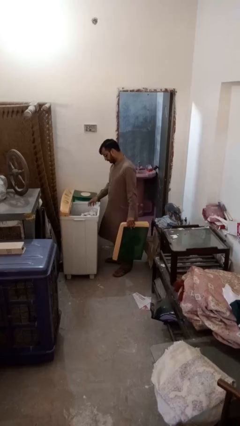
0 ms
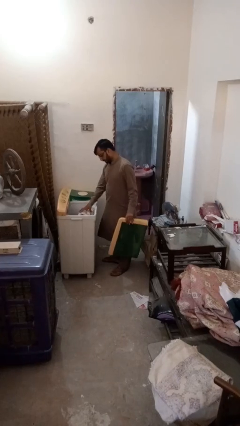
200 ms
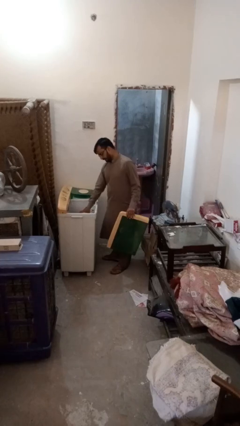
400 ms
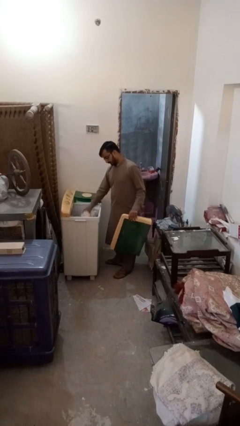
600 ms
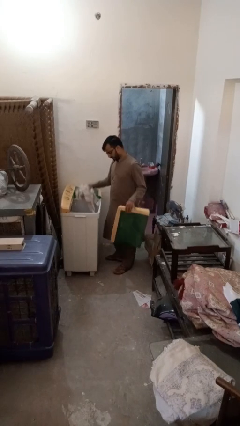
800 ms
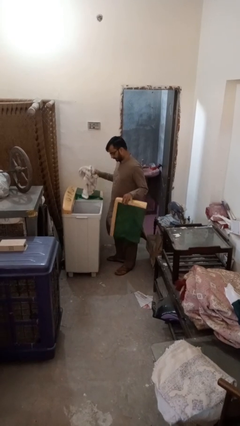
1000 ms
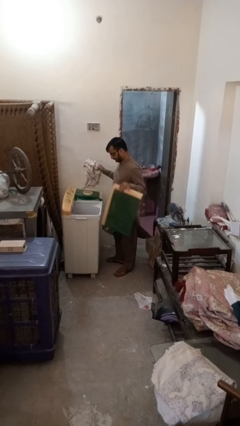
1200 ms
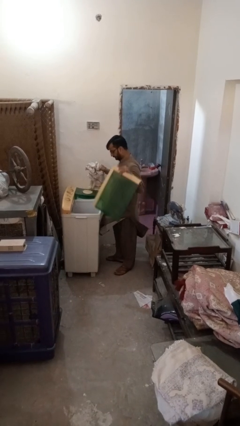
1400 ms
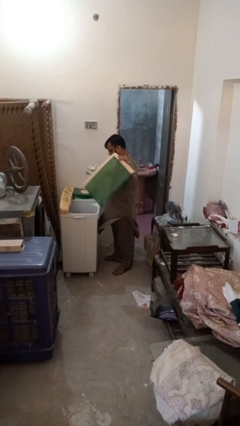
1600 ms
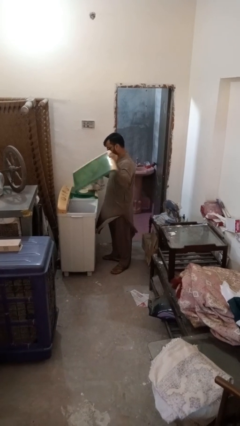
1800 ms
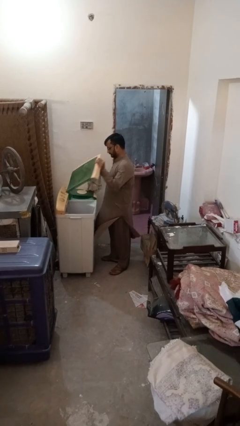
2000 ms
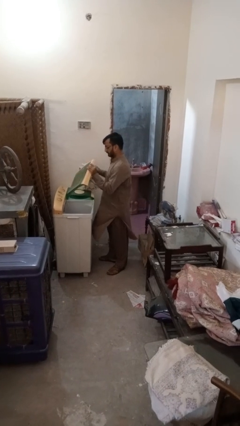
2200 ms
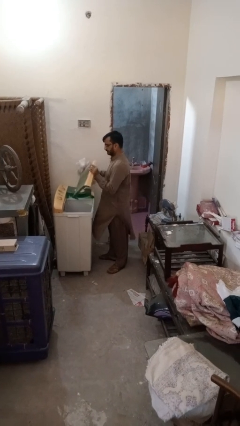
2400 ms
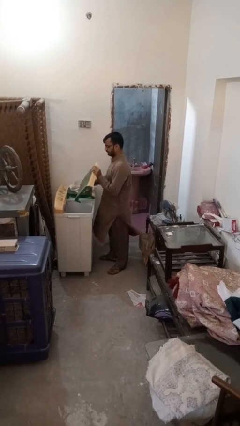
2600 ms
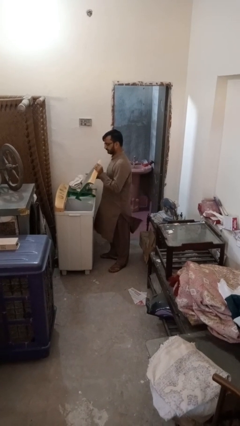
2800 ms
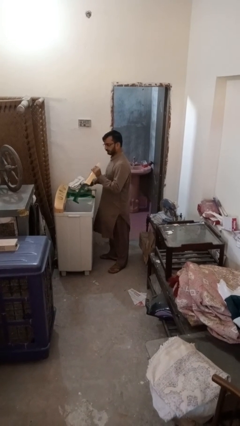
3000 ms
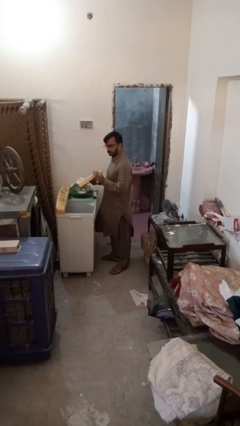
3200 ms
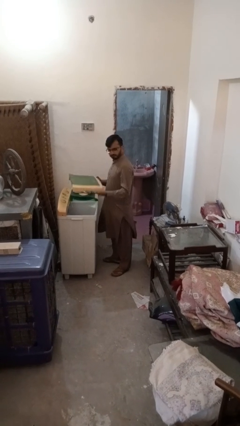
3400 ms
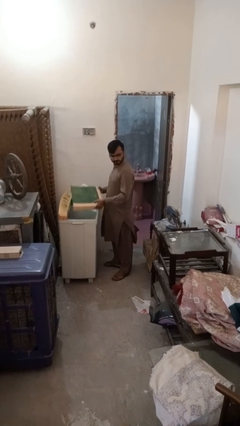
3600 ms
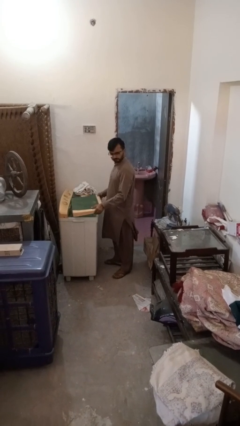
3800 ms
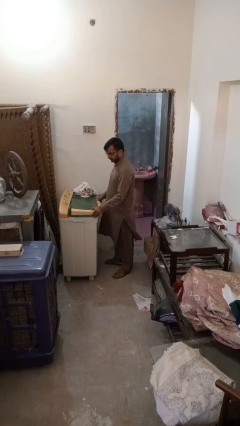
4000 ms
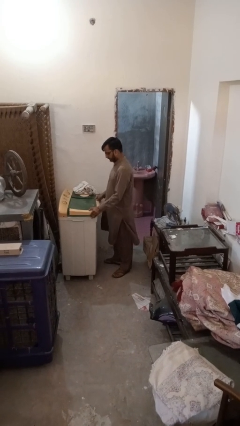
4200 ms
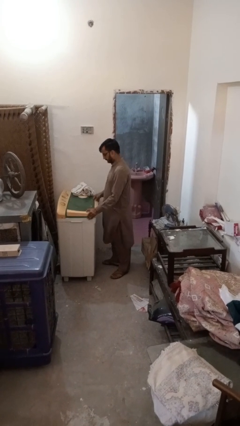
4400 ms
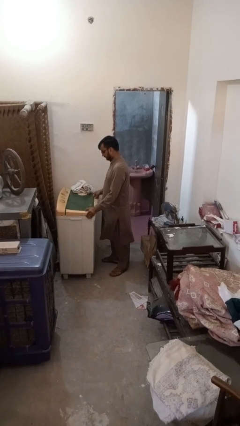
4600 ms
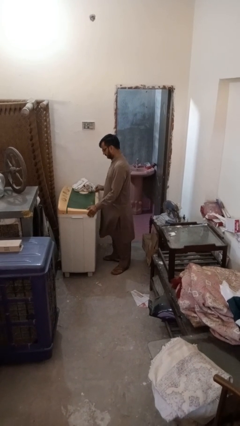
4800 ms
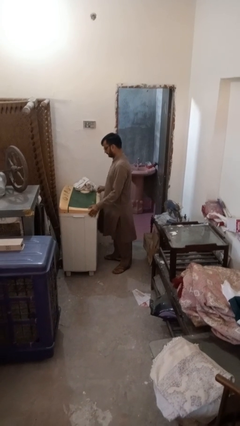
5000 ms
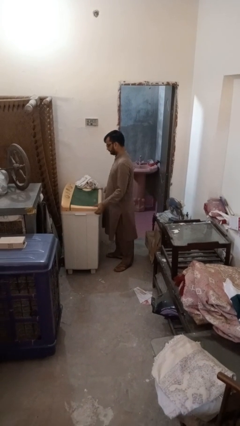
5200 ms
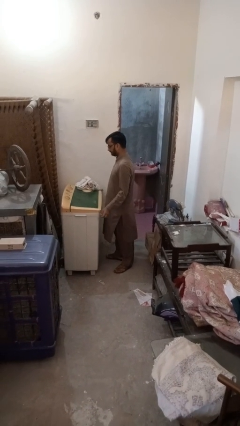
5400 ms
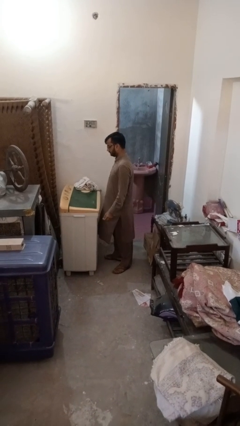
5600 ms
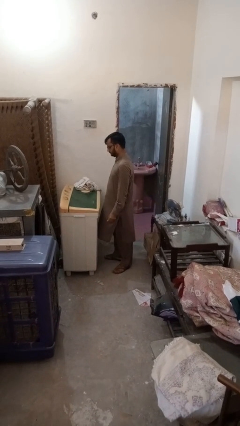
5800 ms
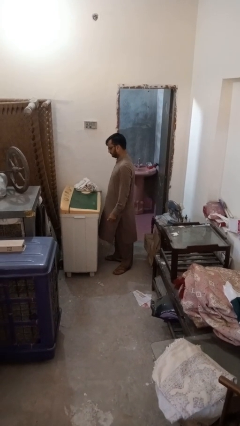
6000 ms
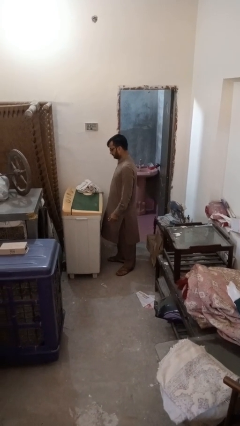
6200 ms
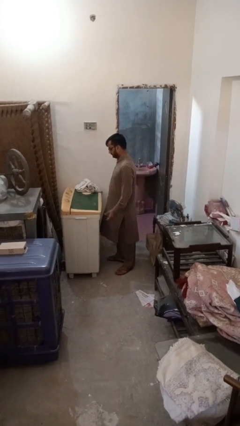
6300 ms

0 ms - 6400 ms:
person unloads clotheswasher

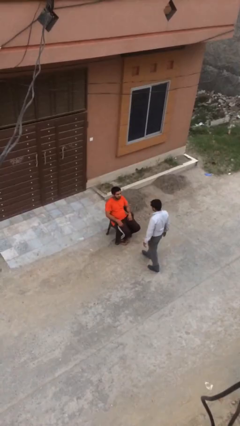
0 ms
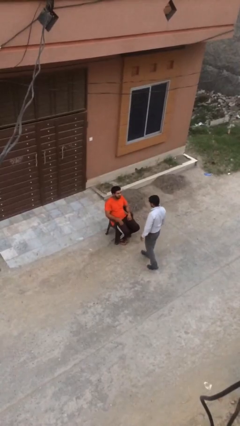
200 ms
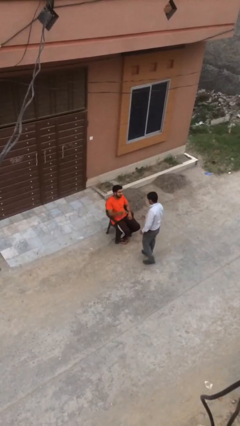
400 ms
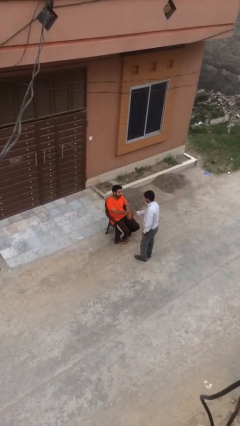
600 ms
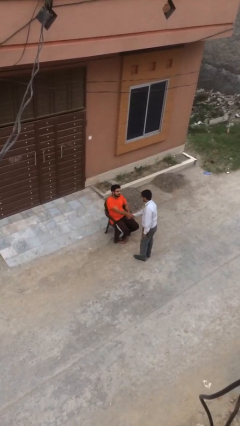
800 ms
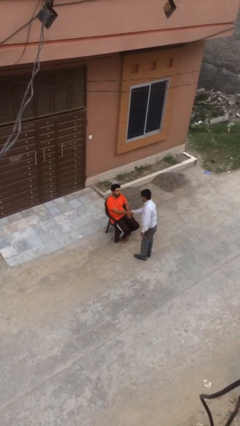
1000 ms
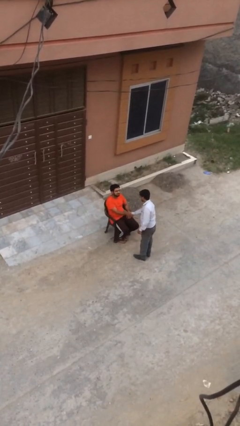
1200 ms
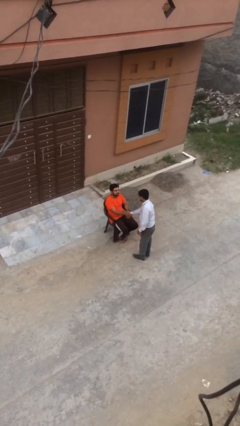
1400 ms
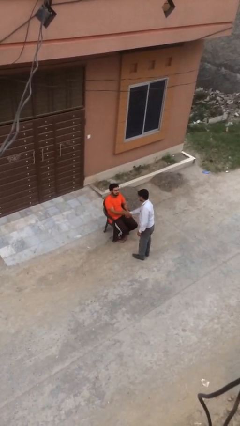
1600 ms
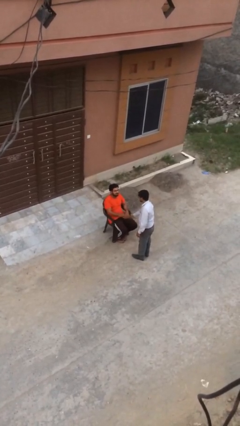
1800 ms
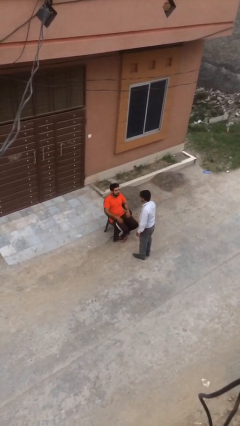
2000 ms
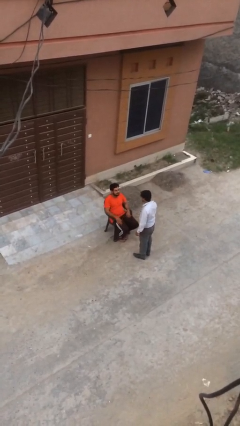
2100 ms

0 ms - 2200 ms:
person shakes hand

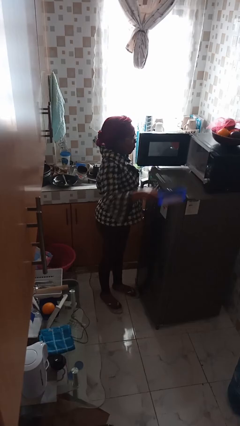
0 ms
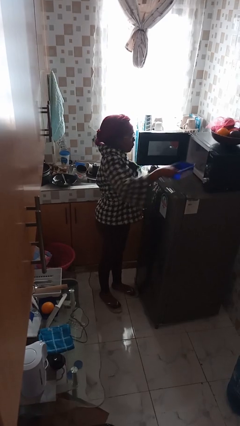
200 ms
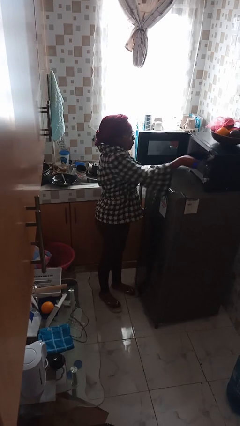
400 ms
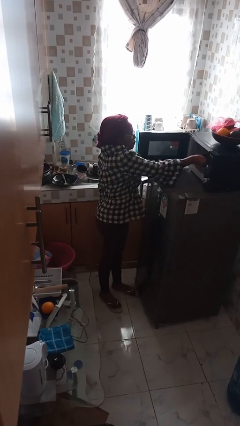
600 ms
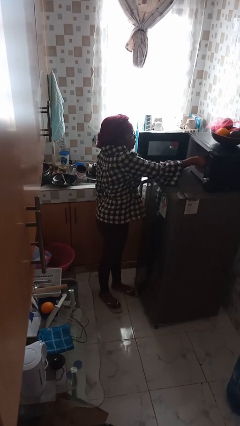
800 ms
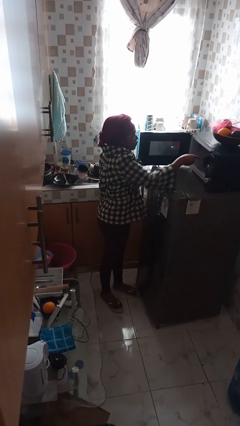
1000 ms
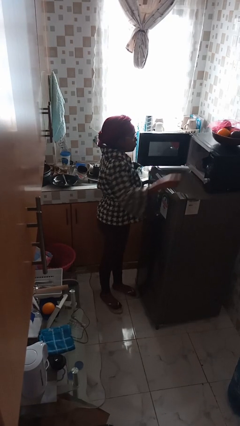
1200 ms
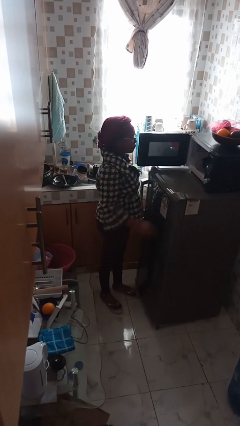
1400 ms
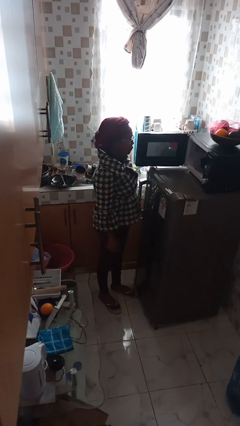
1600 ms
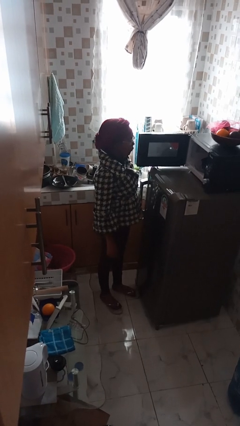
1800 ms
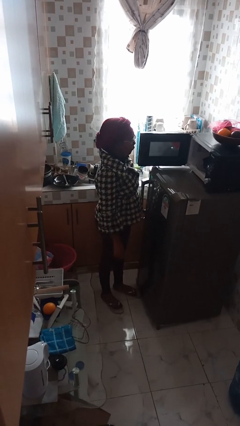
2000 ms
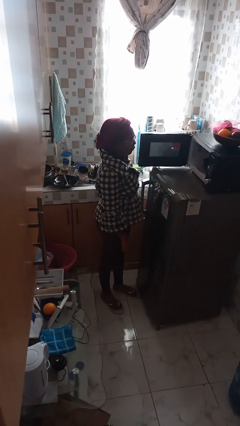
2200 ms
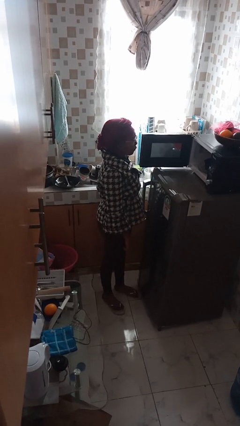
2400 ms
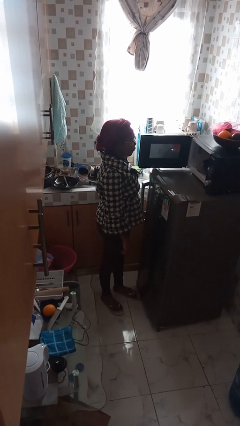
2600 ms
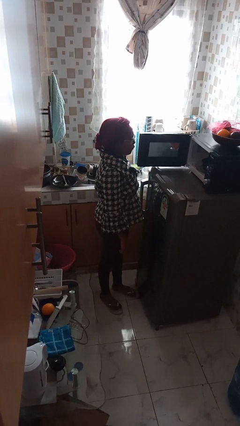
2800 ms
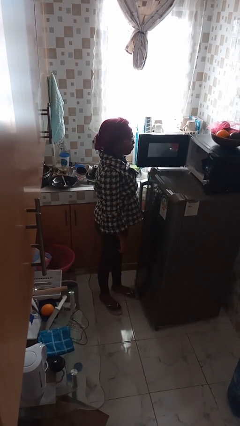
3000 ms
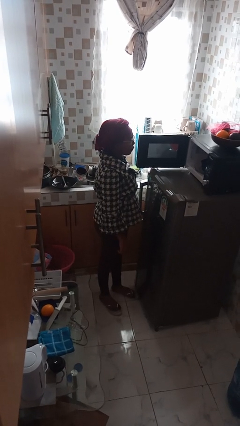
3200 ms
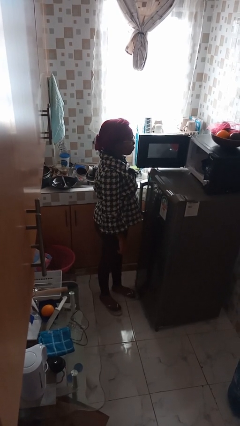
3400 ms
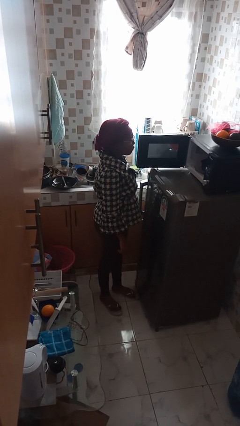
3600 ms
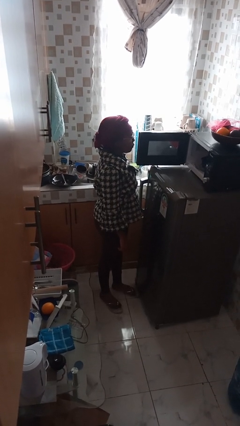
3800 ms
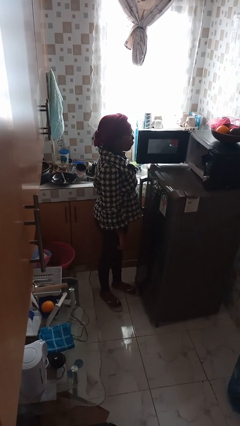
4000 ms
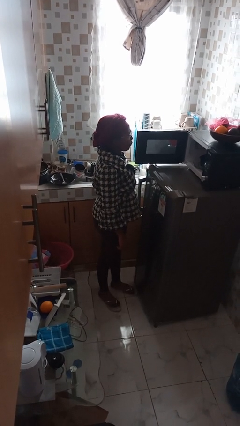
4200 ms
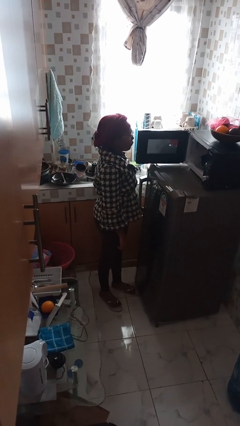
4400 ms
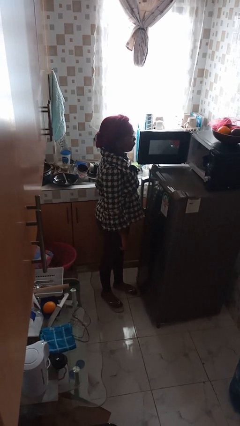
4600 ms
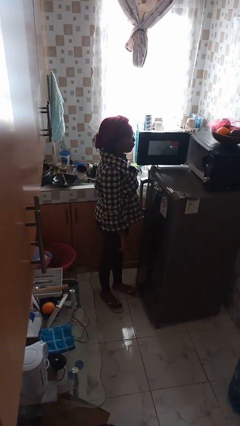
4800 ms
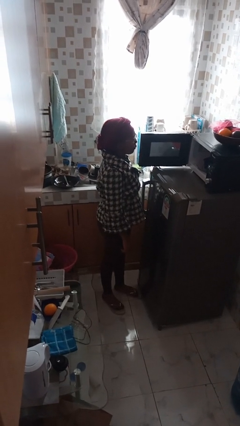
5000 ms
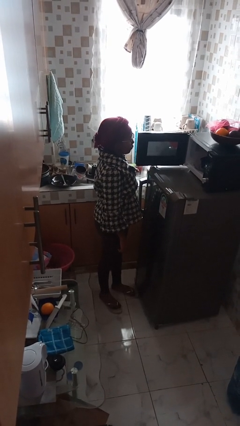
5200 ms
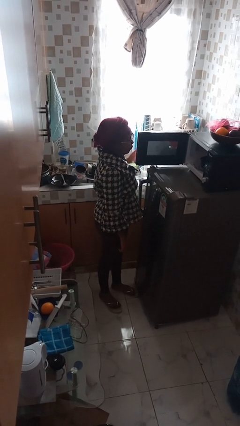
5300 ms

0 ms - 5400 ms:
person puts object into microwave

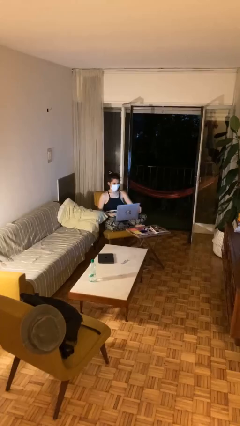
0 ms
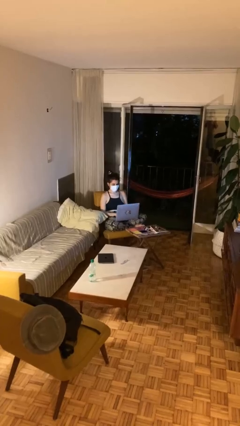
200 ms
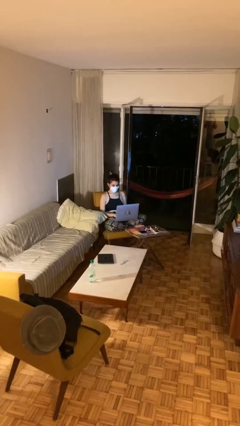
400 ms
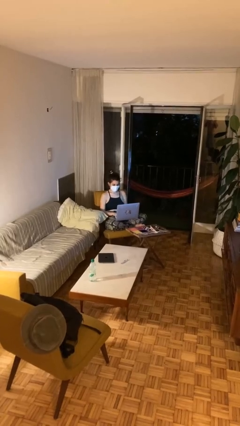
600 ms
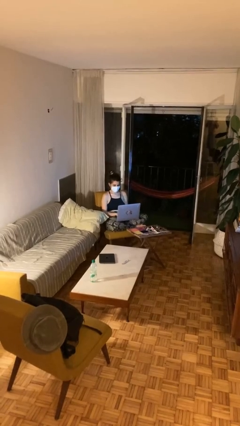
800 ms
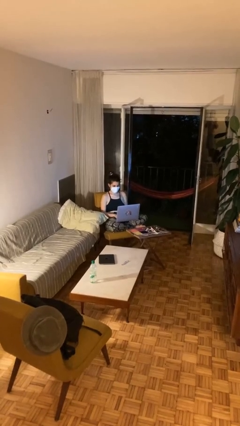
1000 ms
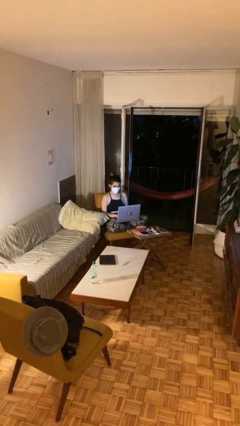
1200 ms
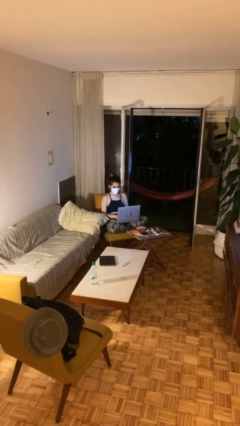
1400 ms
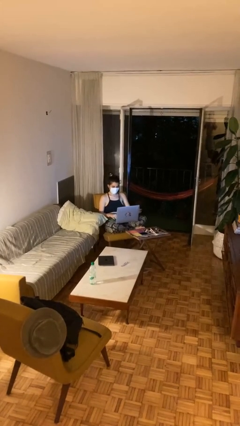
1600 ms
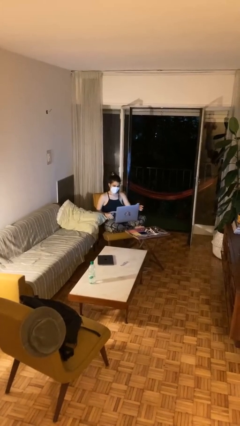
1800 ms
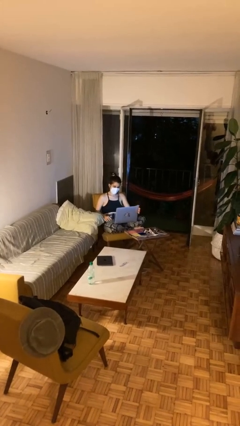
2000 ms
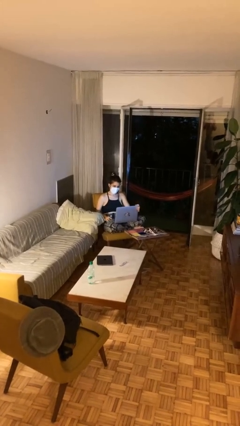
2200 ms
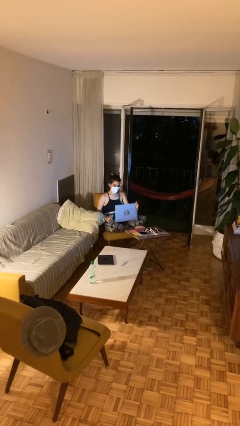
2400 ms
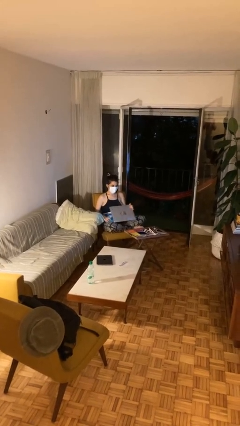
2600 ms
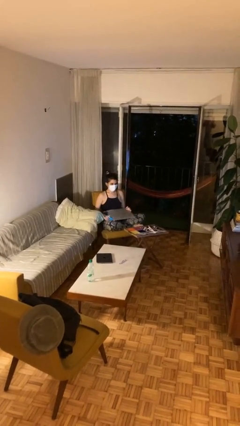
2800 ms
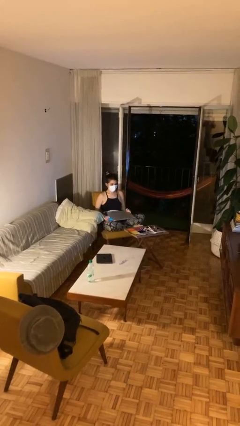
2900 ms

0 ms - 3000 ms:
person interacts with laptop

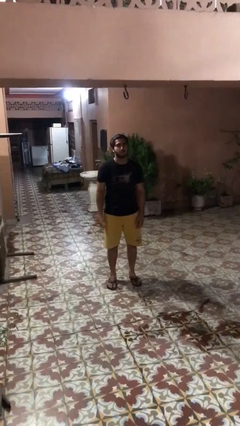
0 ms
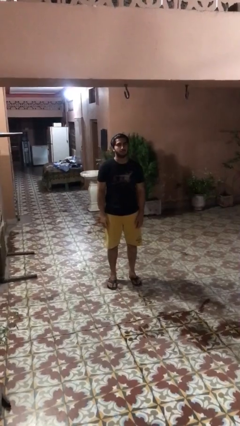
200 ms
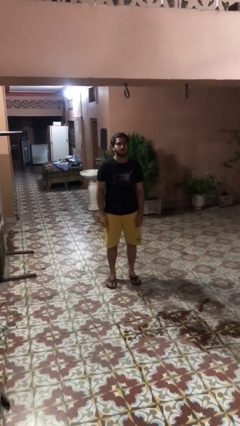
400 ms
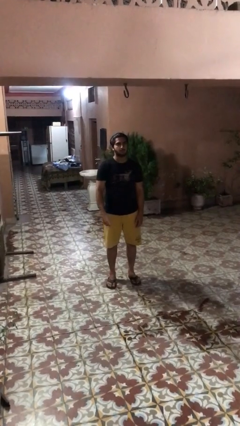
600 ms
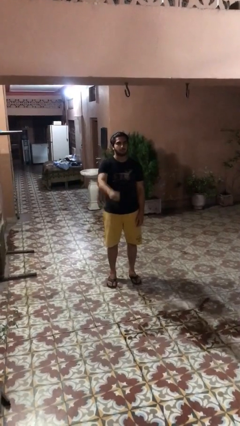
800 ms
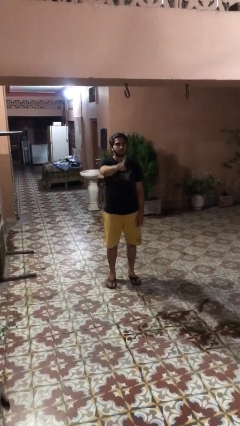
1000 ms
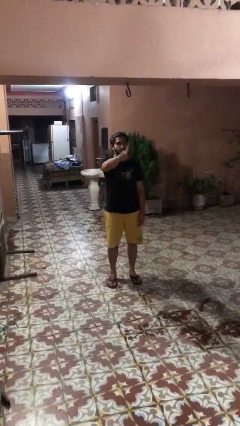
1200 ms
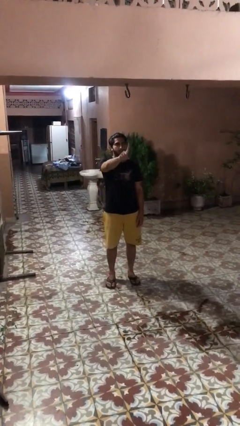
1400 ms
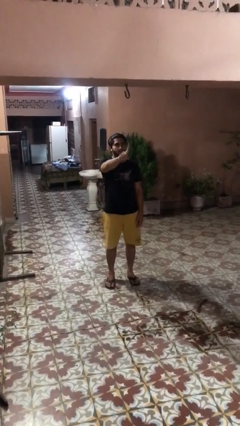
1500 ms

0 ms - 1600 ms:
person gestures number one
